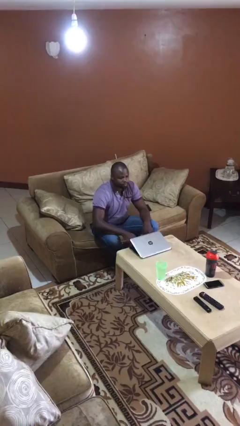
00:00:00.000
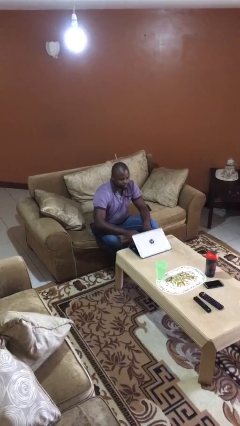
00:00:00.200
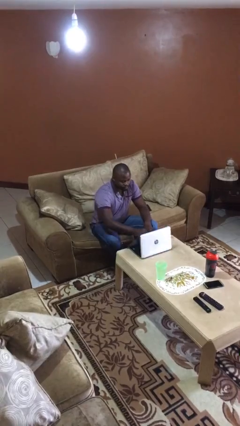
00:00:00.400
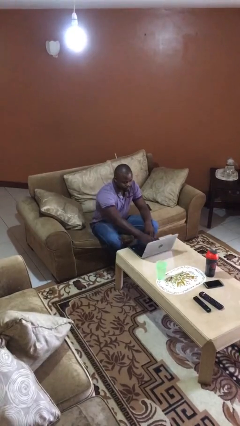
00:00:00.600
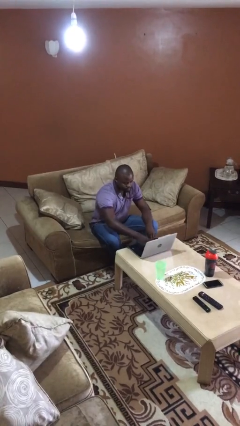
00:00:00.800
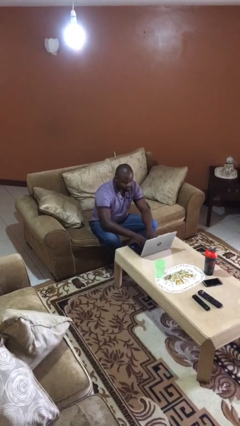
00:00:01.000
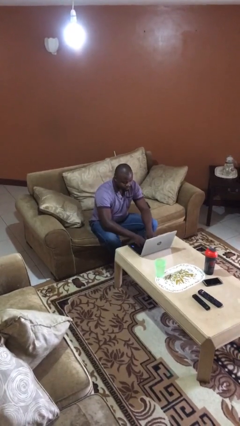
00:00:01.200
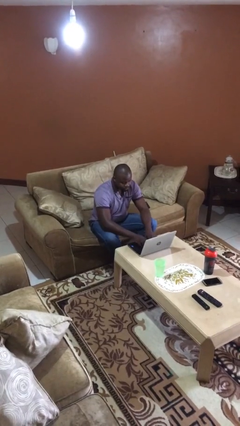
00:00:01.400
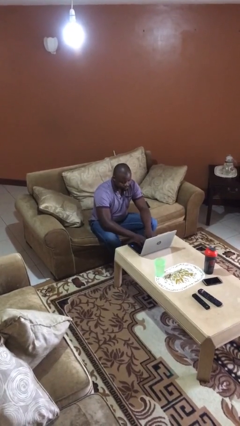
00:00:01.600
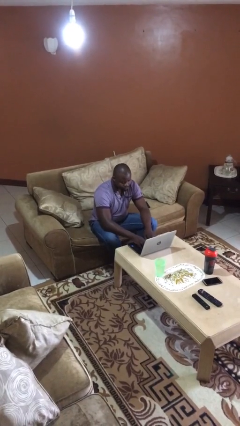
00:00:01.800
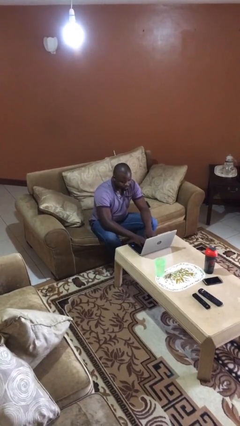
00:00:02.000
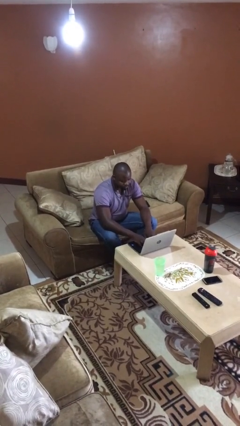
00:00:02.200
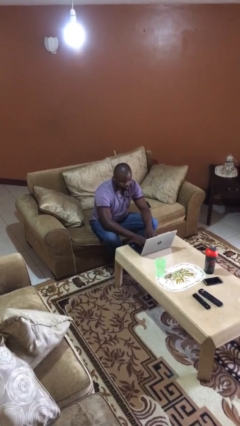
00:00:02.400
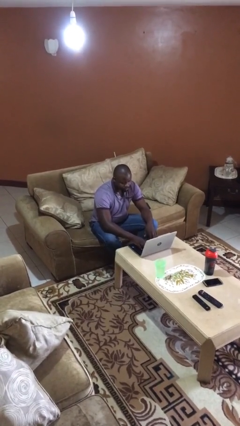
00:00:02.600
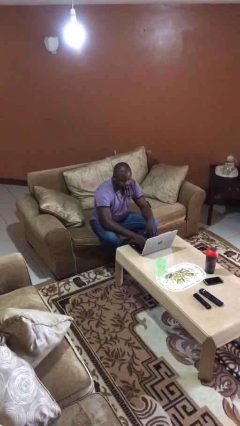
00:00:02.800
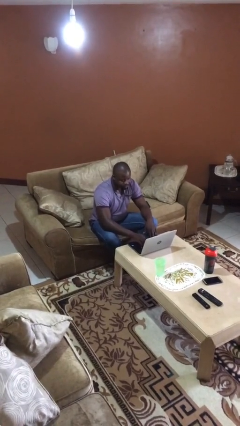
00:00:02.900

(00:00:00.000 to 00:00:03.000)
person interacts with laptop

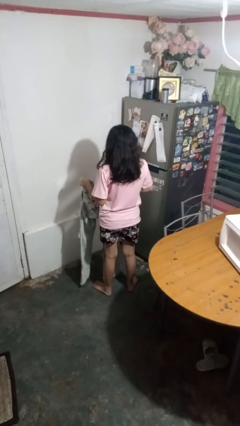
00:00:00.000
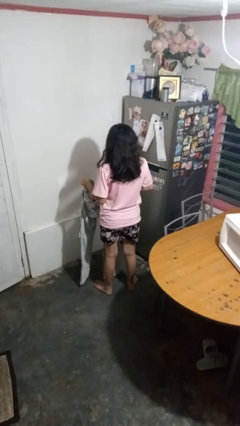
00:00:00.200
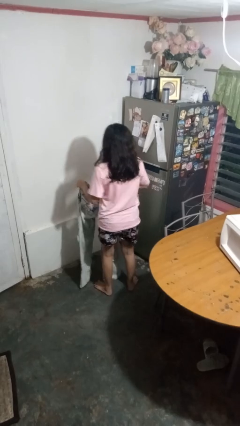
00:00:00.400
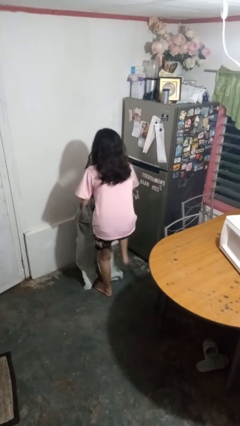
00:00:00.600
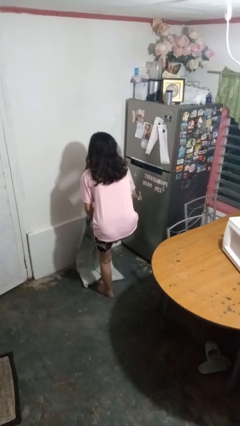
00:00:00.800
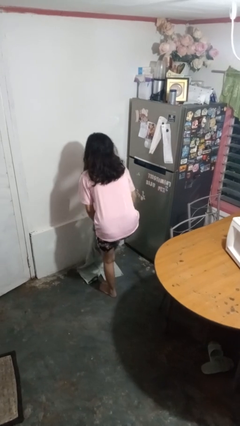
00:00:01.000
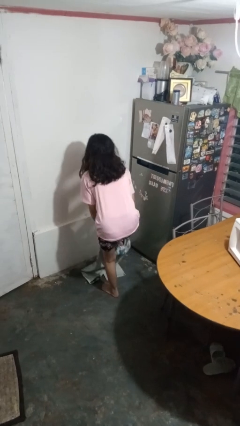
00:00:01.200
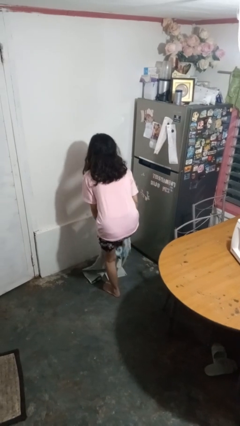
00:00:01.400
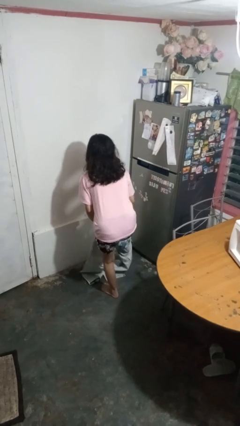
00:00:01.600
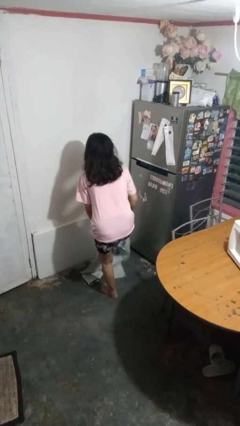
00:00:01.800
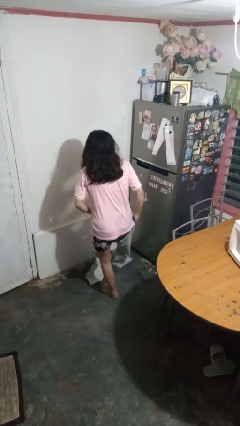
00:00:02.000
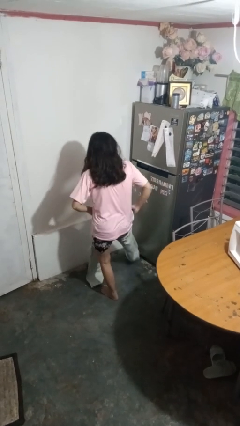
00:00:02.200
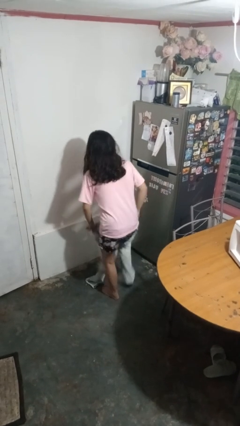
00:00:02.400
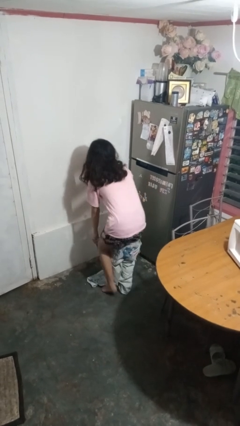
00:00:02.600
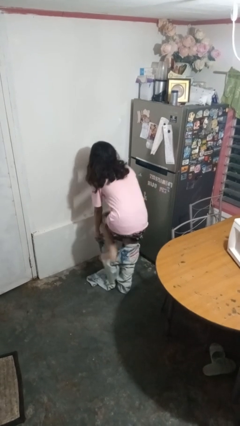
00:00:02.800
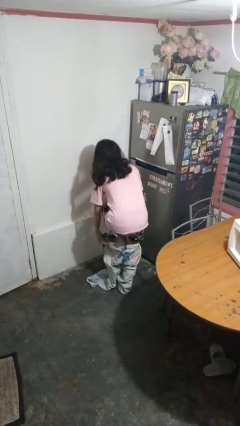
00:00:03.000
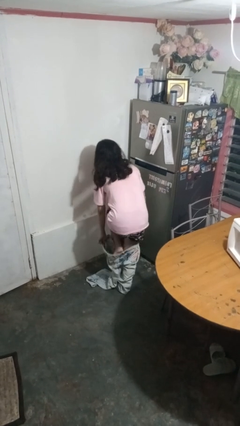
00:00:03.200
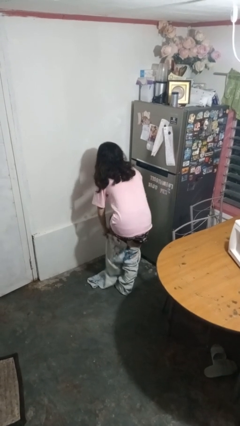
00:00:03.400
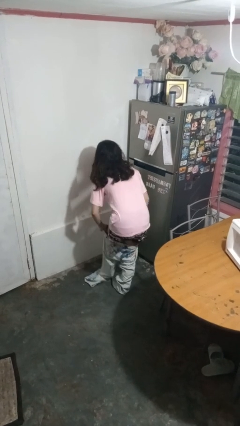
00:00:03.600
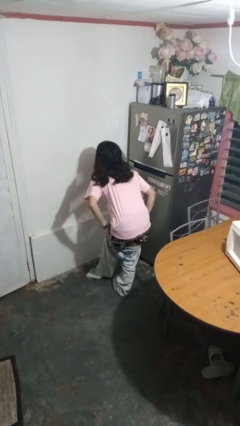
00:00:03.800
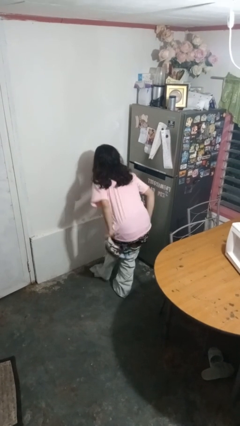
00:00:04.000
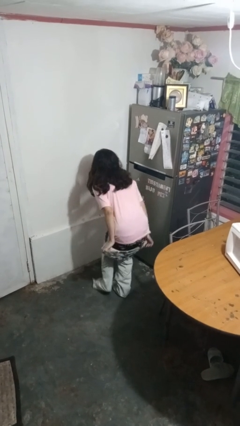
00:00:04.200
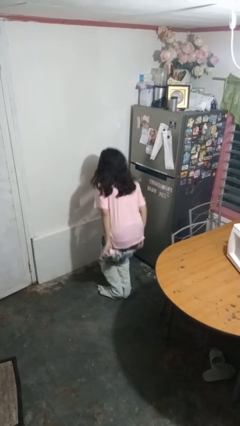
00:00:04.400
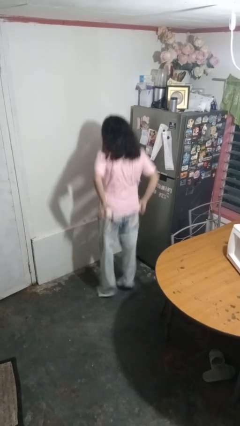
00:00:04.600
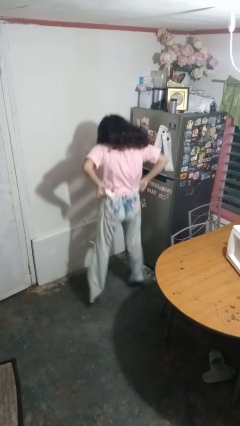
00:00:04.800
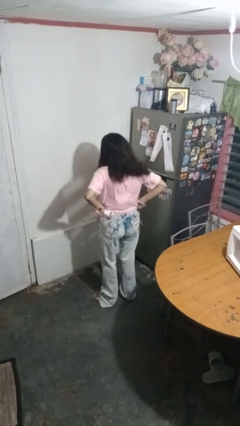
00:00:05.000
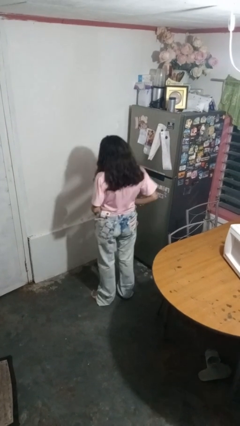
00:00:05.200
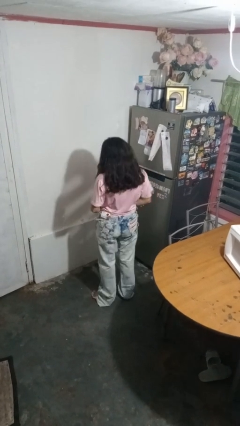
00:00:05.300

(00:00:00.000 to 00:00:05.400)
person puts on pants

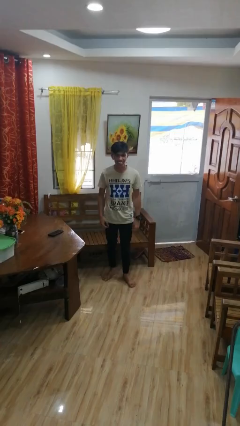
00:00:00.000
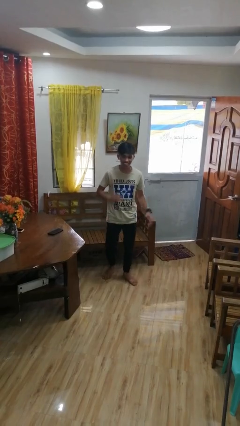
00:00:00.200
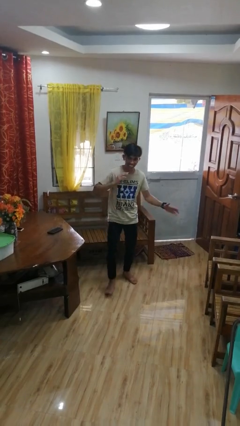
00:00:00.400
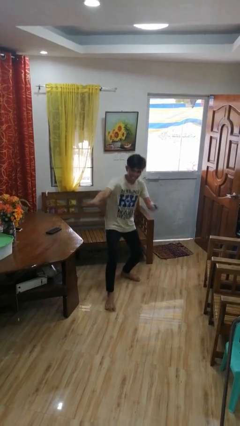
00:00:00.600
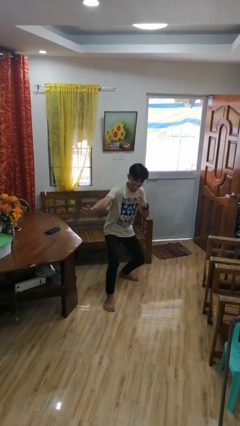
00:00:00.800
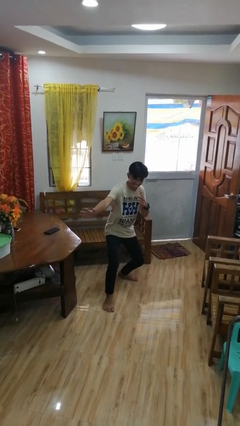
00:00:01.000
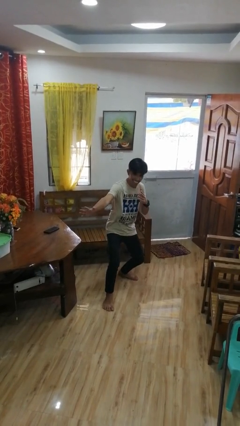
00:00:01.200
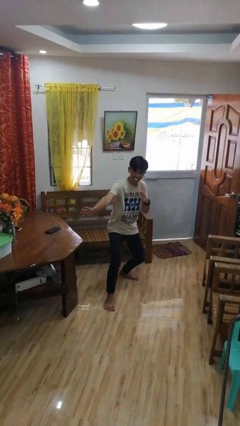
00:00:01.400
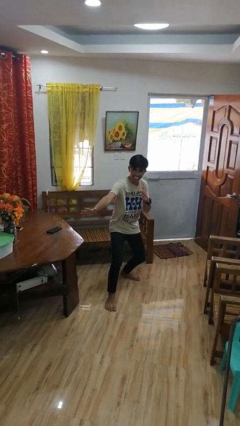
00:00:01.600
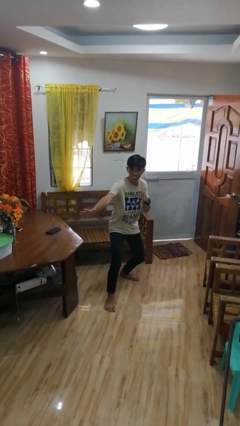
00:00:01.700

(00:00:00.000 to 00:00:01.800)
person karate chop

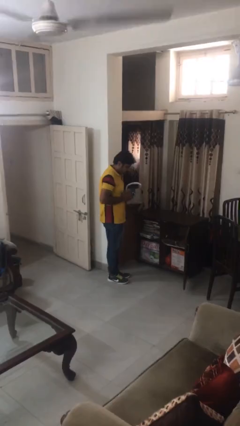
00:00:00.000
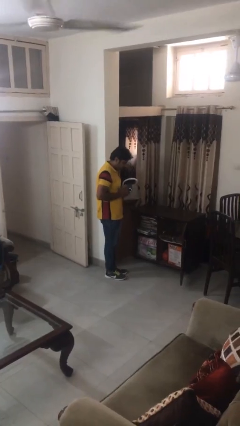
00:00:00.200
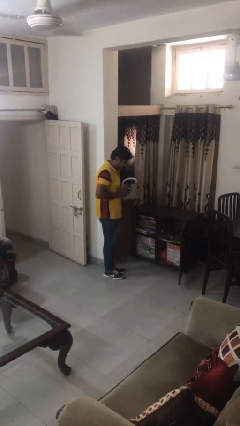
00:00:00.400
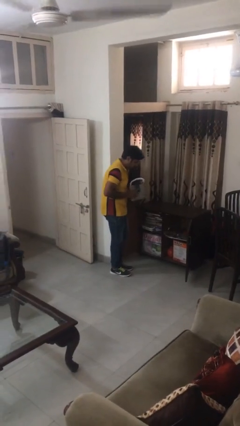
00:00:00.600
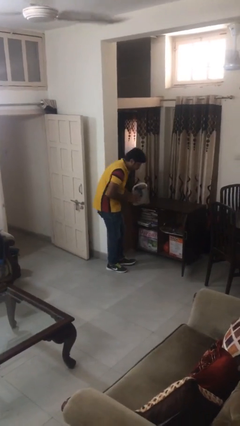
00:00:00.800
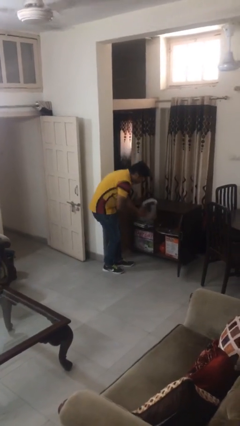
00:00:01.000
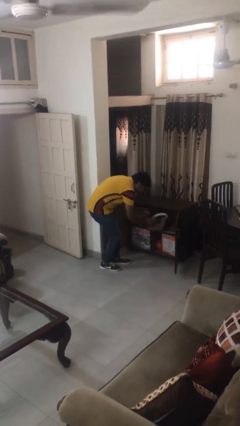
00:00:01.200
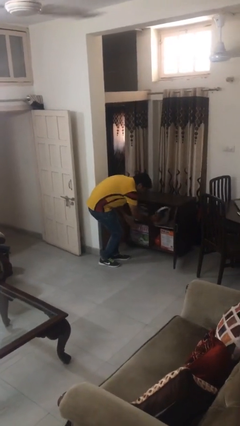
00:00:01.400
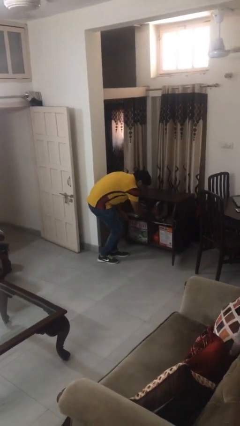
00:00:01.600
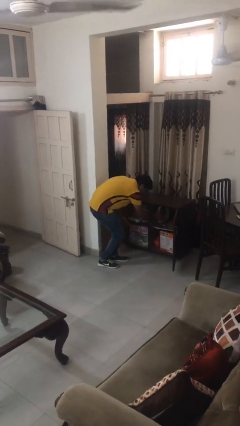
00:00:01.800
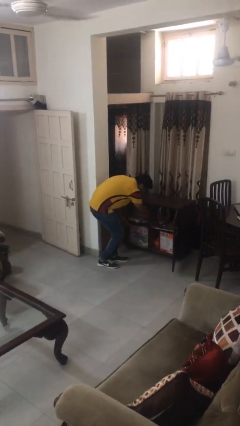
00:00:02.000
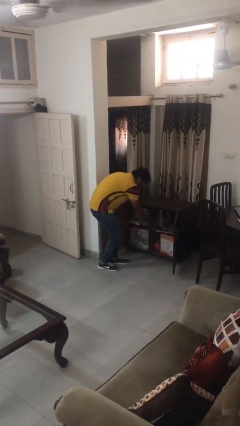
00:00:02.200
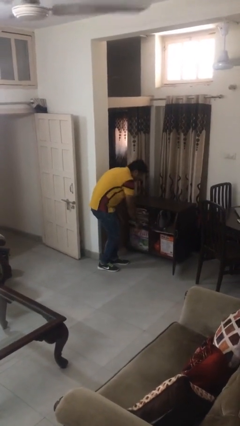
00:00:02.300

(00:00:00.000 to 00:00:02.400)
person puts down object into cabinet

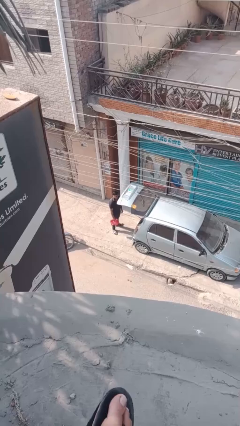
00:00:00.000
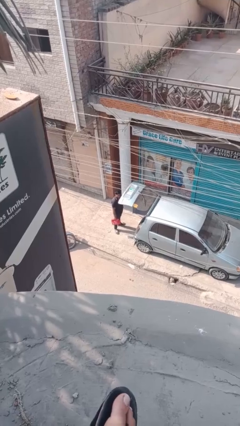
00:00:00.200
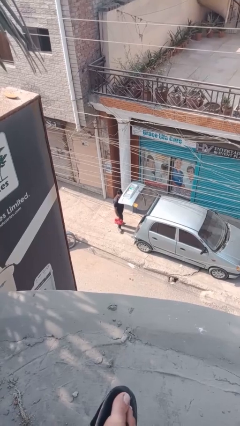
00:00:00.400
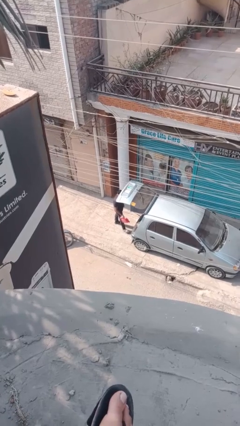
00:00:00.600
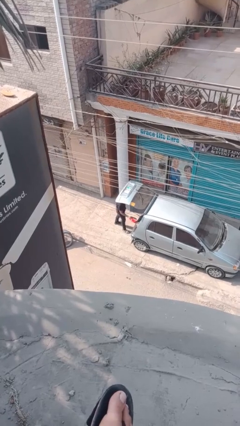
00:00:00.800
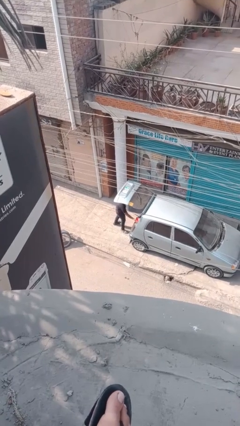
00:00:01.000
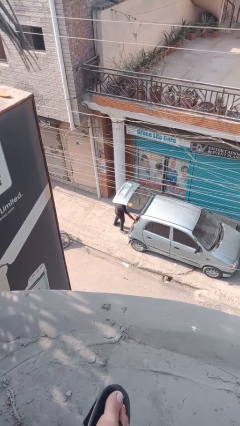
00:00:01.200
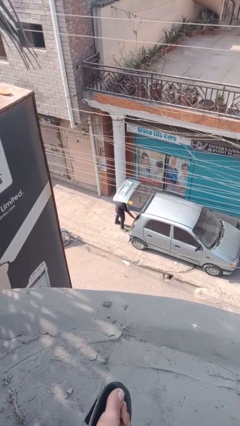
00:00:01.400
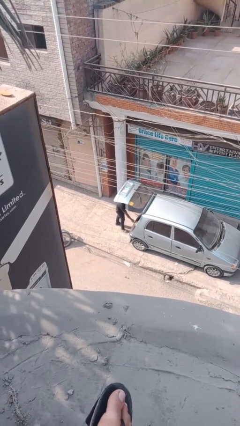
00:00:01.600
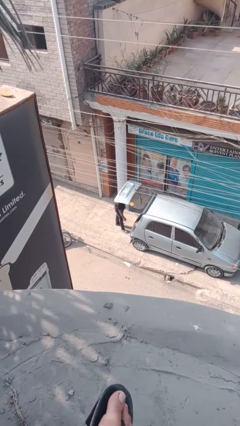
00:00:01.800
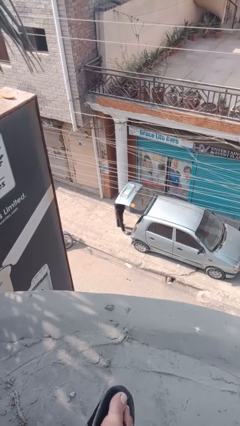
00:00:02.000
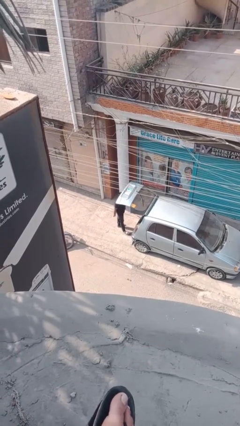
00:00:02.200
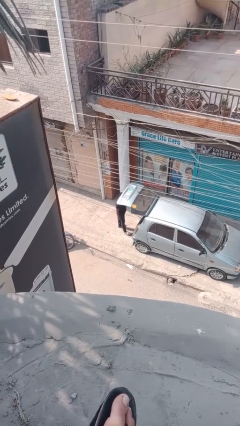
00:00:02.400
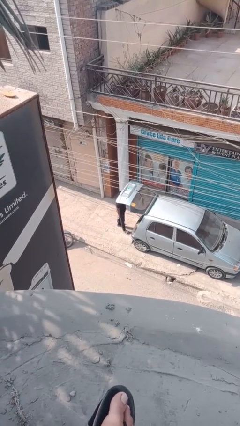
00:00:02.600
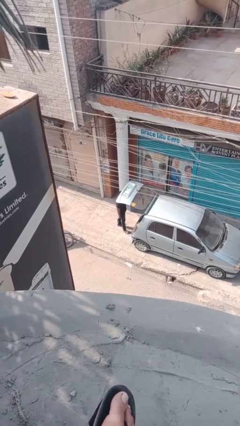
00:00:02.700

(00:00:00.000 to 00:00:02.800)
person loads car

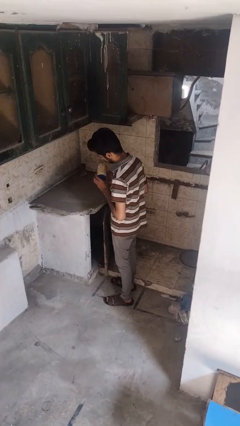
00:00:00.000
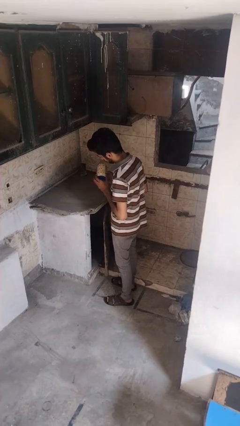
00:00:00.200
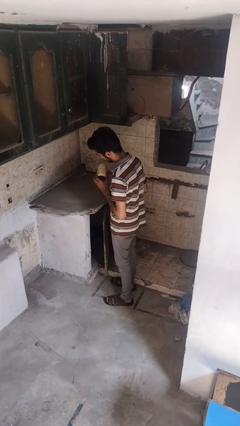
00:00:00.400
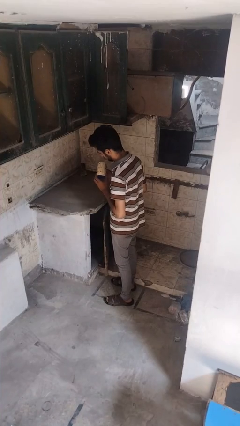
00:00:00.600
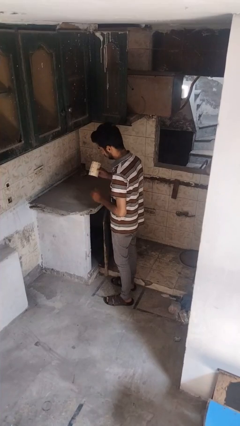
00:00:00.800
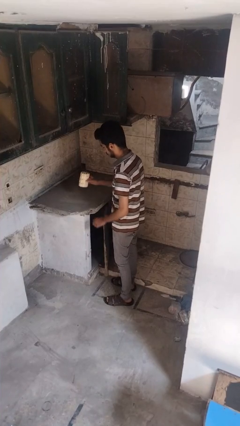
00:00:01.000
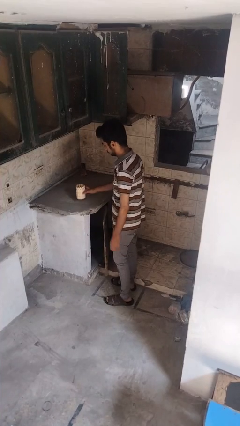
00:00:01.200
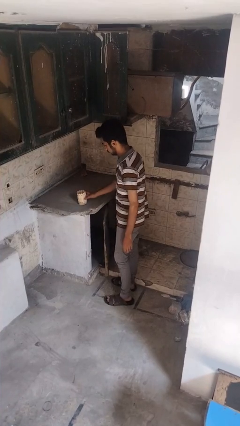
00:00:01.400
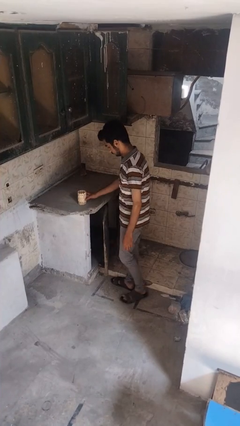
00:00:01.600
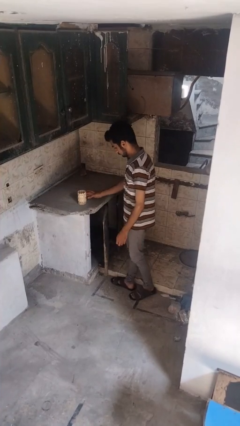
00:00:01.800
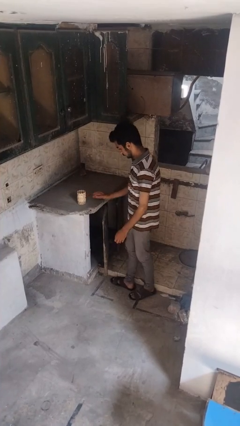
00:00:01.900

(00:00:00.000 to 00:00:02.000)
person puts down object on countertop
